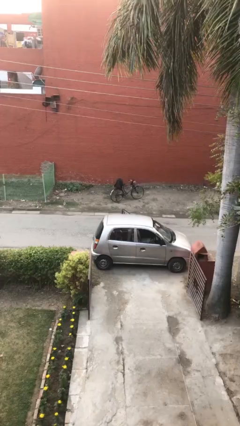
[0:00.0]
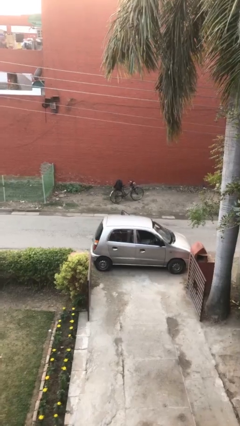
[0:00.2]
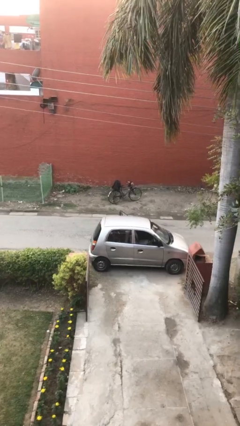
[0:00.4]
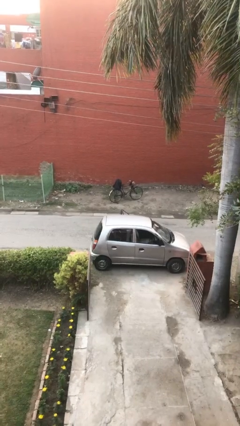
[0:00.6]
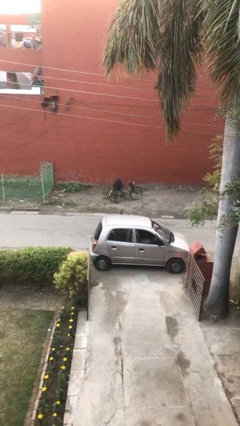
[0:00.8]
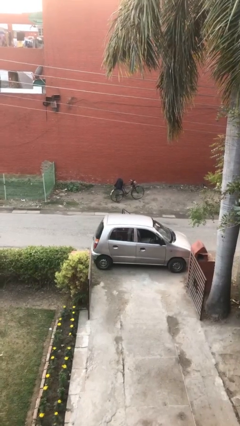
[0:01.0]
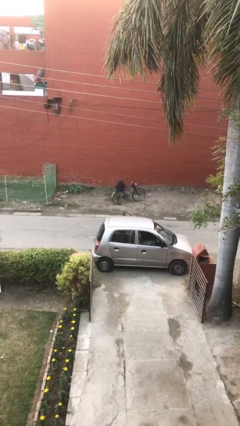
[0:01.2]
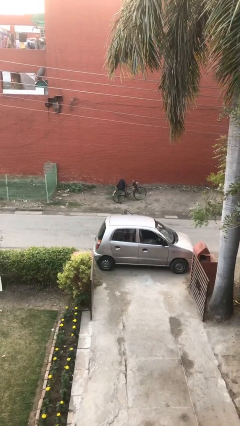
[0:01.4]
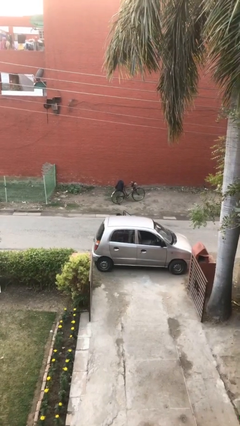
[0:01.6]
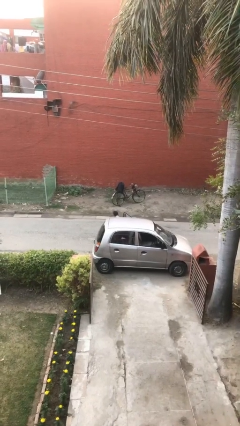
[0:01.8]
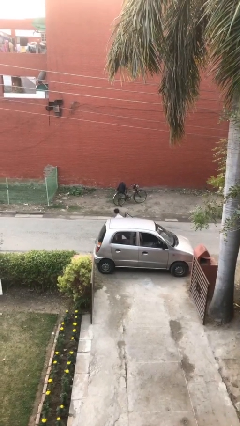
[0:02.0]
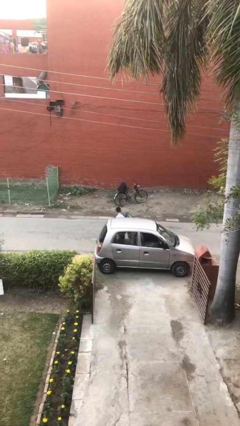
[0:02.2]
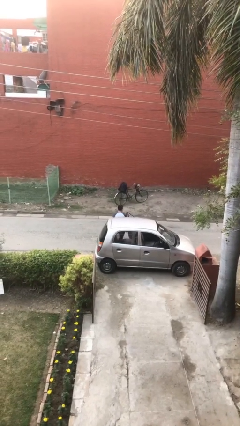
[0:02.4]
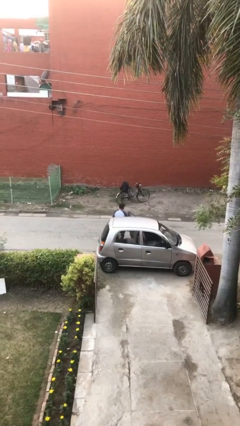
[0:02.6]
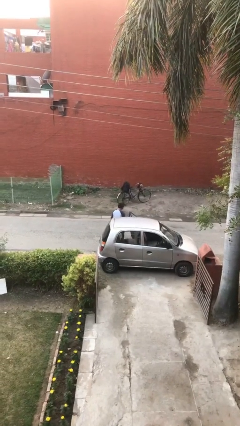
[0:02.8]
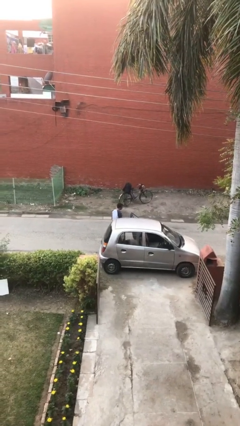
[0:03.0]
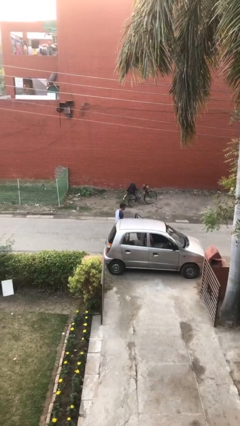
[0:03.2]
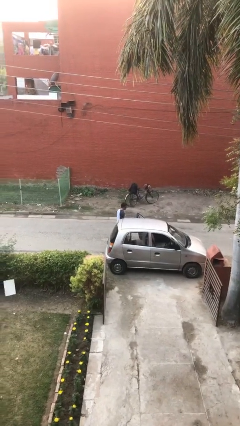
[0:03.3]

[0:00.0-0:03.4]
person exits car

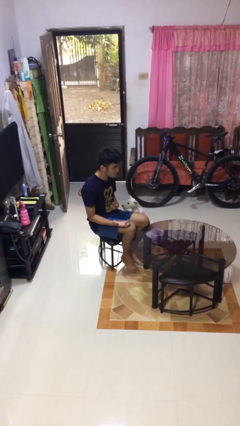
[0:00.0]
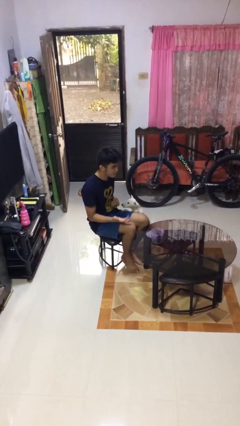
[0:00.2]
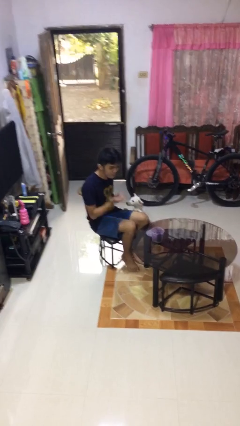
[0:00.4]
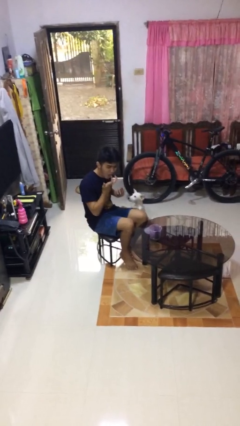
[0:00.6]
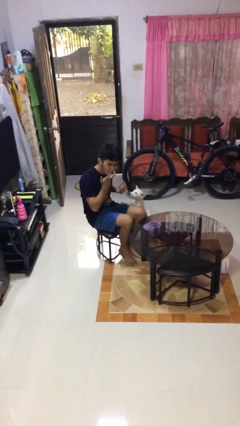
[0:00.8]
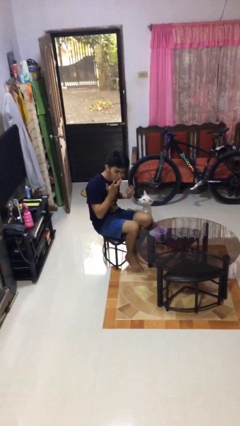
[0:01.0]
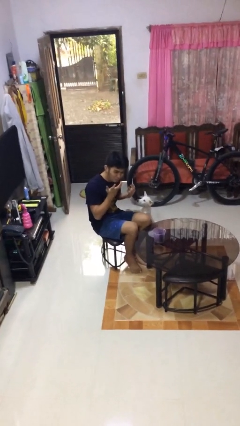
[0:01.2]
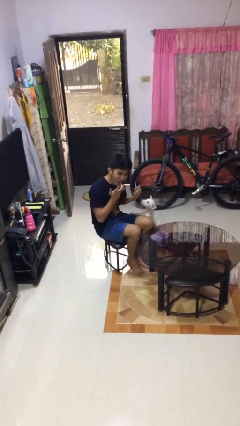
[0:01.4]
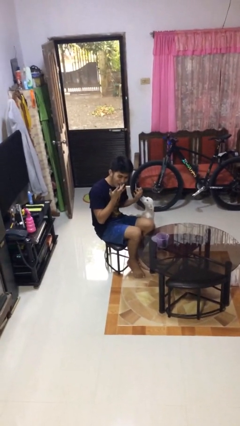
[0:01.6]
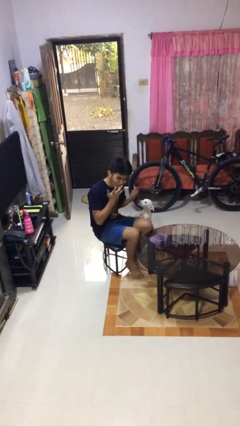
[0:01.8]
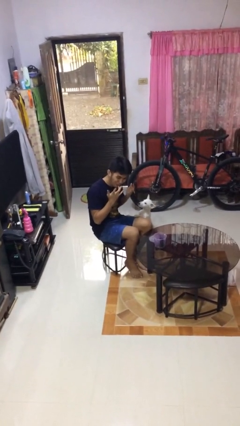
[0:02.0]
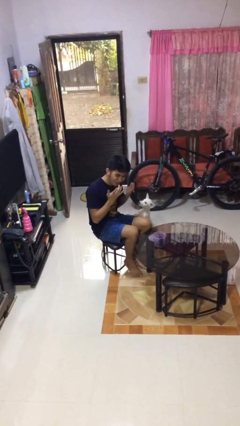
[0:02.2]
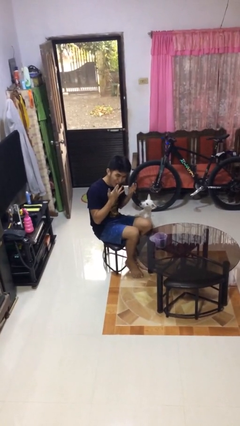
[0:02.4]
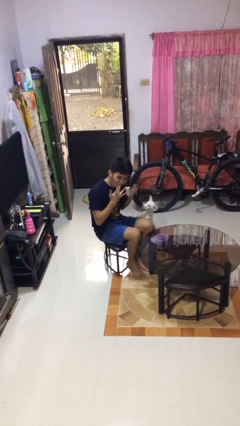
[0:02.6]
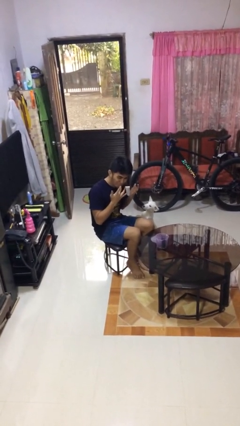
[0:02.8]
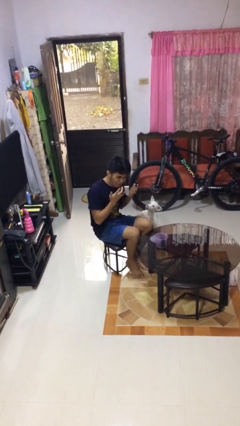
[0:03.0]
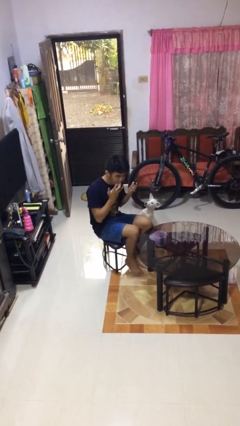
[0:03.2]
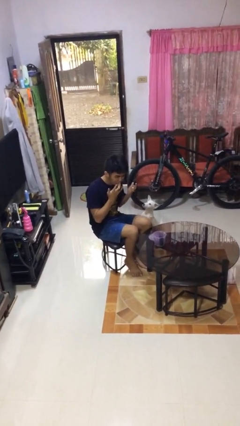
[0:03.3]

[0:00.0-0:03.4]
person licks fingers

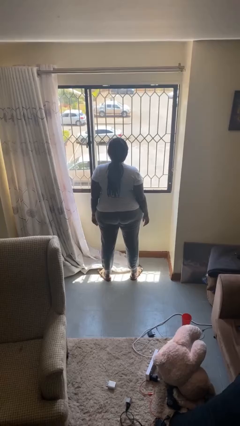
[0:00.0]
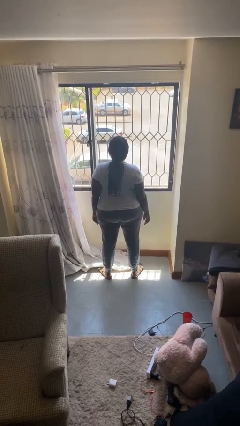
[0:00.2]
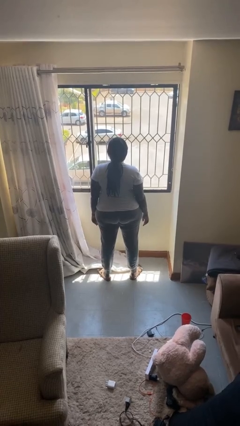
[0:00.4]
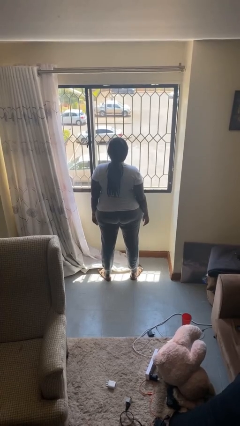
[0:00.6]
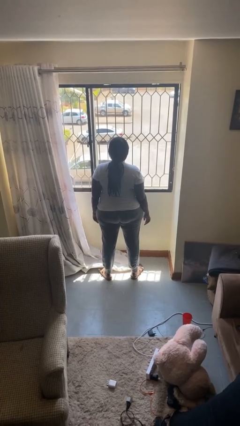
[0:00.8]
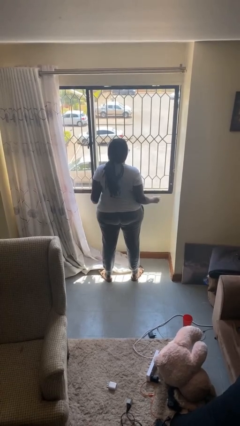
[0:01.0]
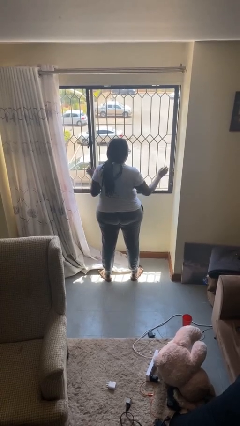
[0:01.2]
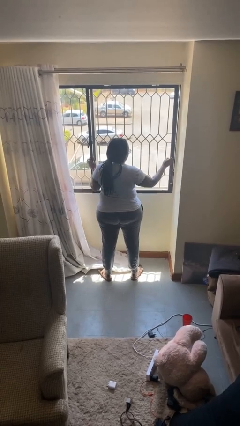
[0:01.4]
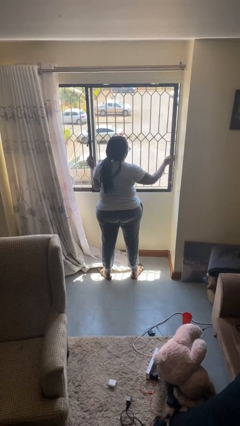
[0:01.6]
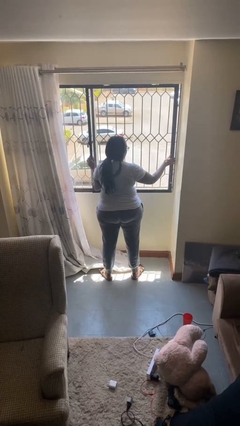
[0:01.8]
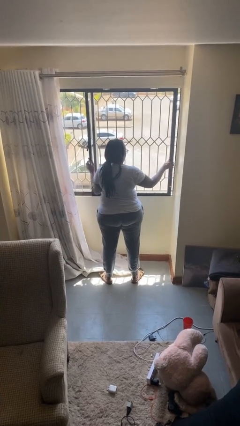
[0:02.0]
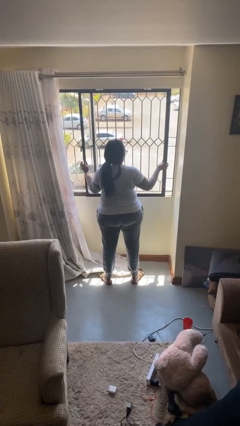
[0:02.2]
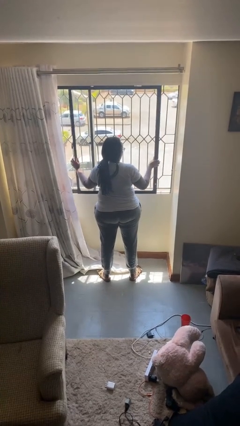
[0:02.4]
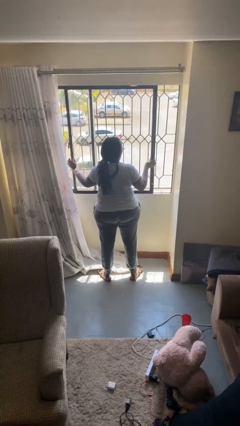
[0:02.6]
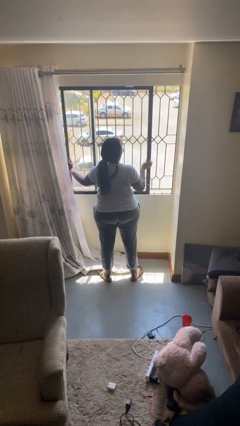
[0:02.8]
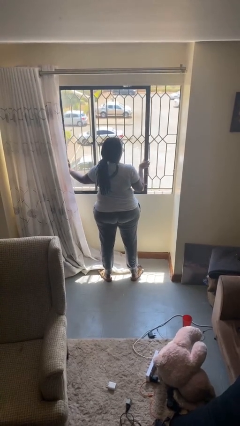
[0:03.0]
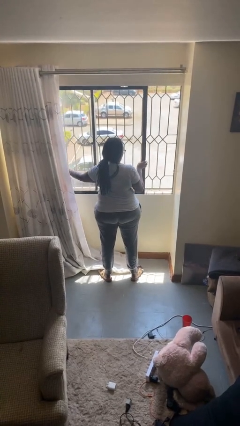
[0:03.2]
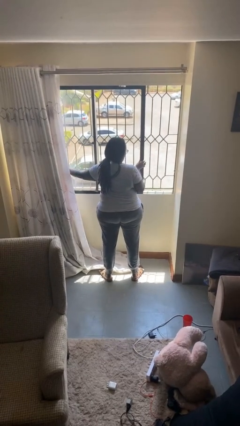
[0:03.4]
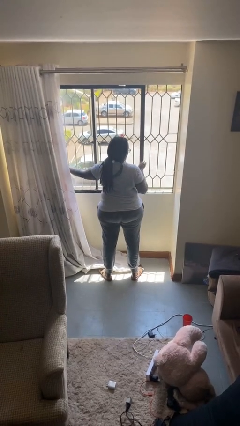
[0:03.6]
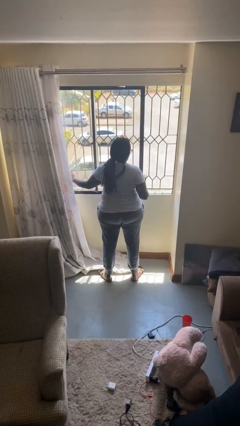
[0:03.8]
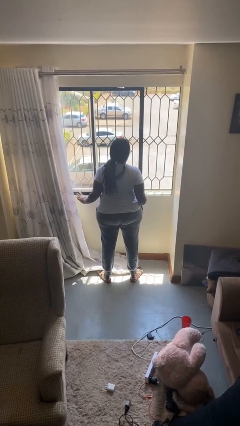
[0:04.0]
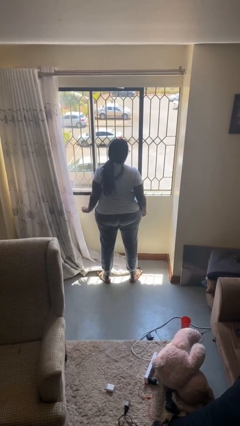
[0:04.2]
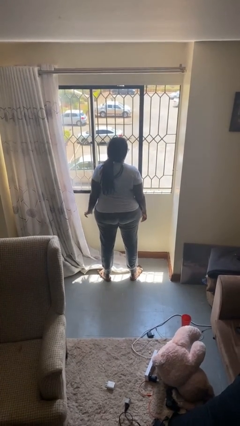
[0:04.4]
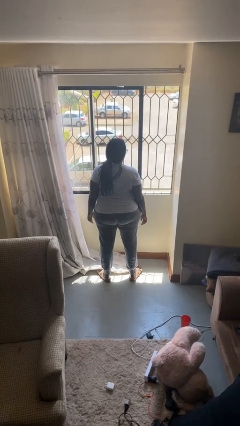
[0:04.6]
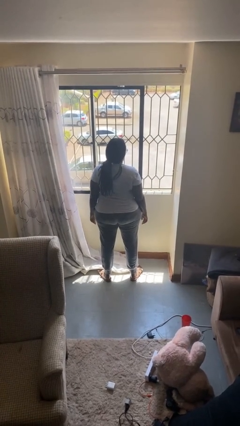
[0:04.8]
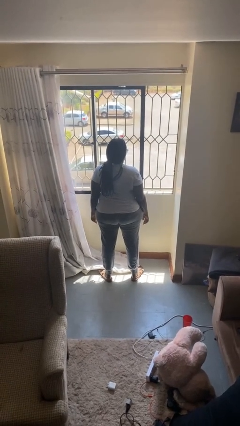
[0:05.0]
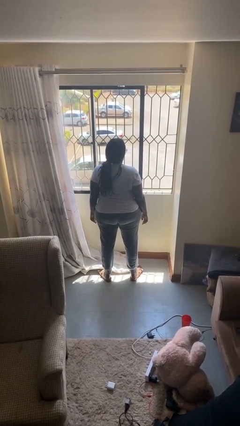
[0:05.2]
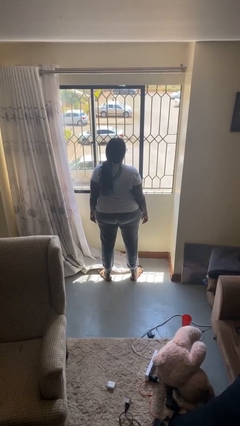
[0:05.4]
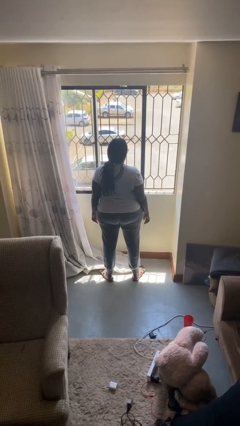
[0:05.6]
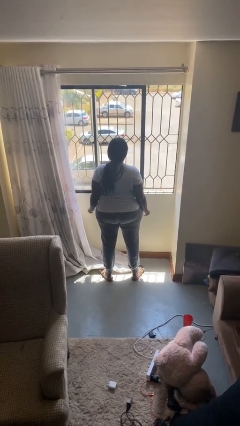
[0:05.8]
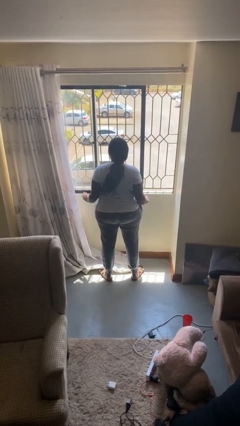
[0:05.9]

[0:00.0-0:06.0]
person opens home window

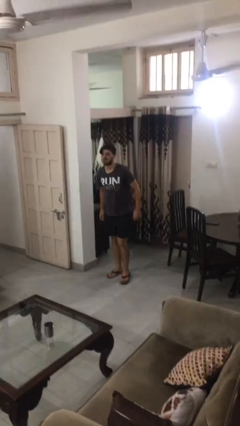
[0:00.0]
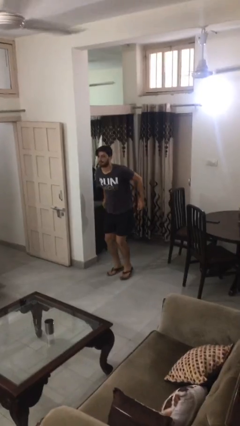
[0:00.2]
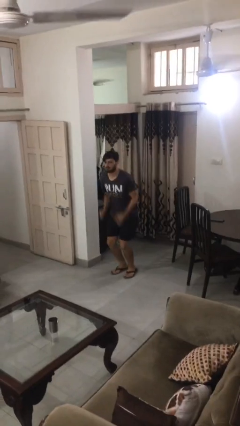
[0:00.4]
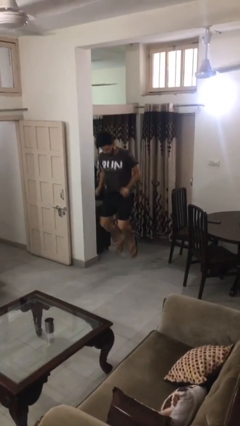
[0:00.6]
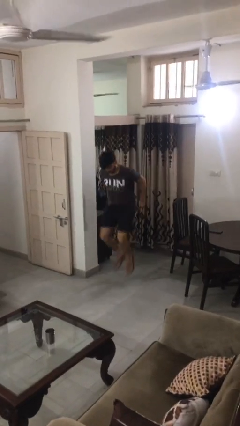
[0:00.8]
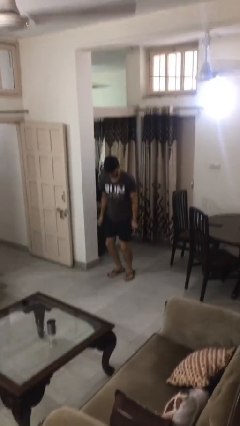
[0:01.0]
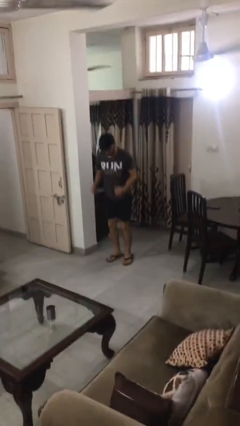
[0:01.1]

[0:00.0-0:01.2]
person jumps

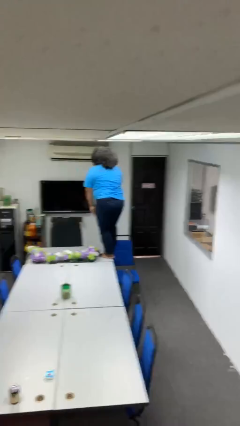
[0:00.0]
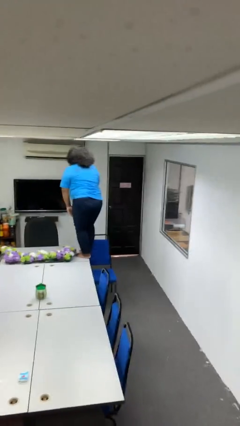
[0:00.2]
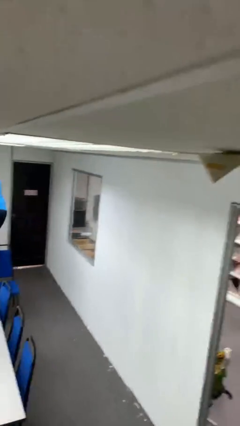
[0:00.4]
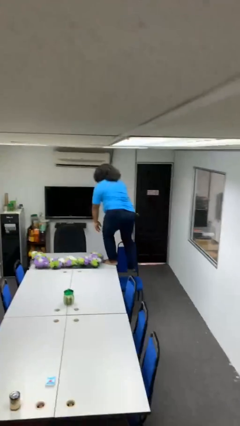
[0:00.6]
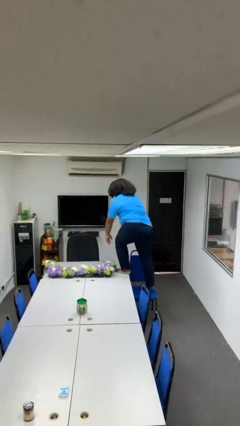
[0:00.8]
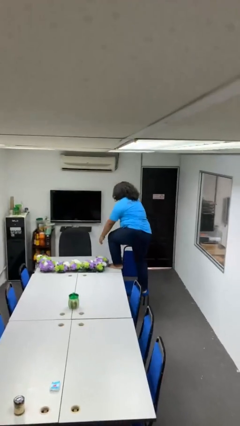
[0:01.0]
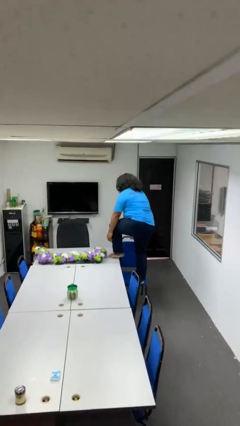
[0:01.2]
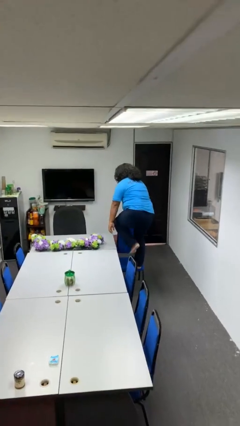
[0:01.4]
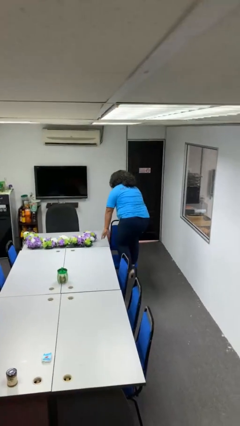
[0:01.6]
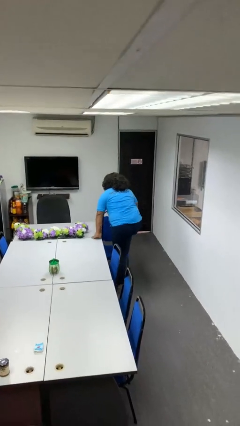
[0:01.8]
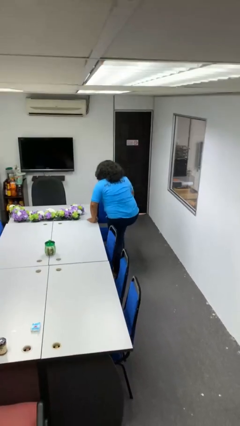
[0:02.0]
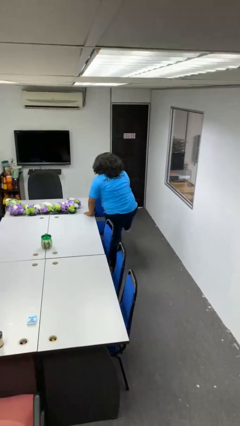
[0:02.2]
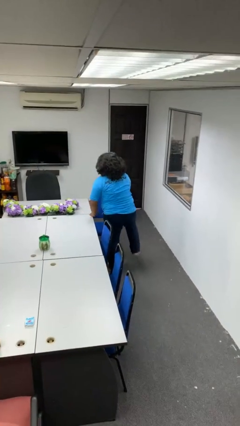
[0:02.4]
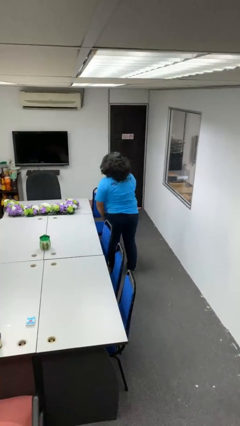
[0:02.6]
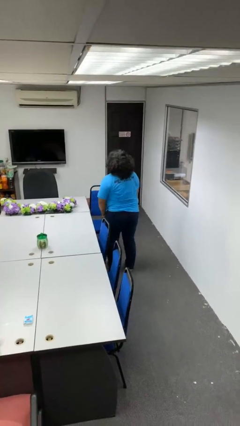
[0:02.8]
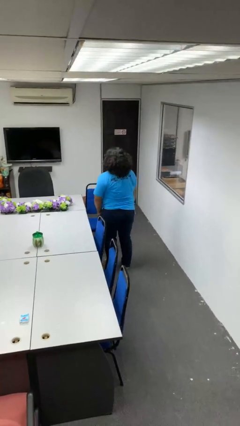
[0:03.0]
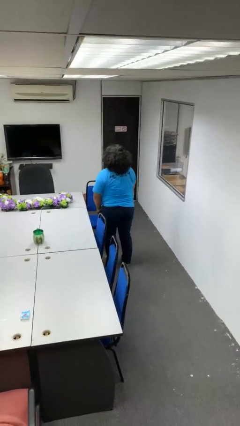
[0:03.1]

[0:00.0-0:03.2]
person climbs off table

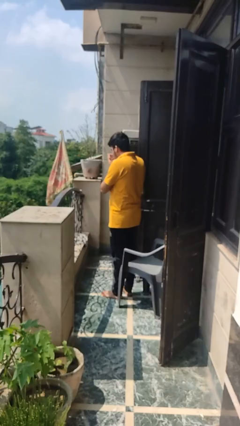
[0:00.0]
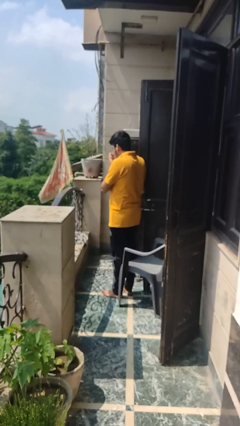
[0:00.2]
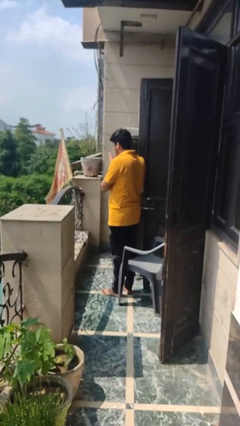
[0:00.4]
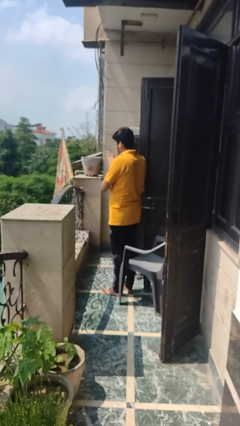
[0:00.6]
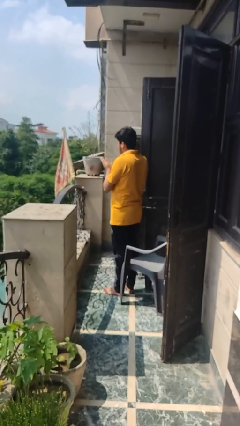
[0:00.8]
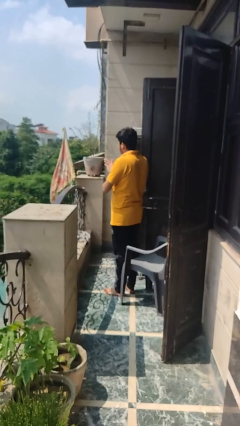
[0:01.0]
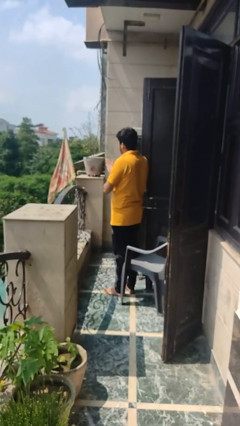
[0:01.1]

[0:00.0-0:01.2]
person blows into hands
